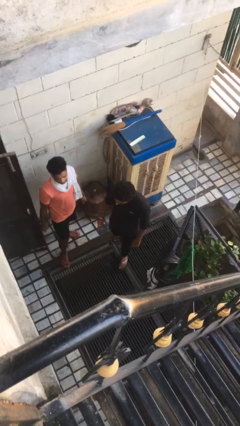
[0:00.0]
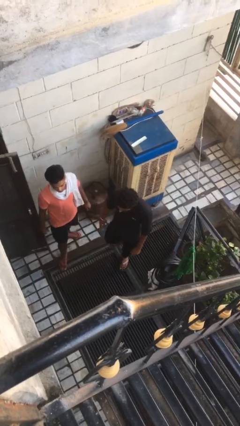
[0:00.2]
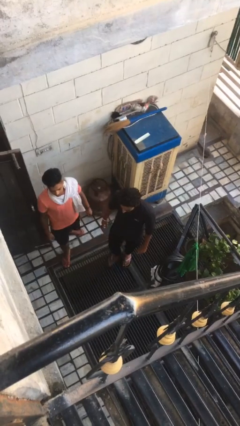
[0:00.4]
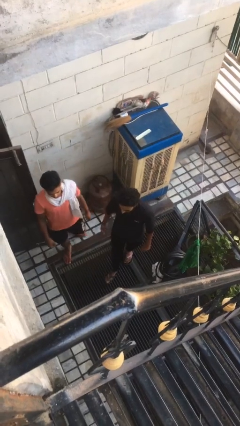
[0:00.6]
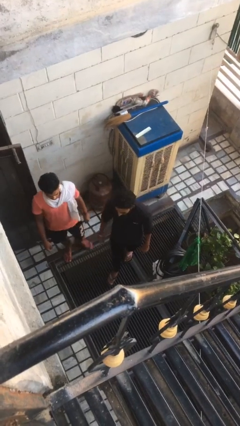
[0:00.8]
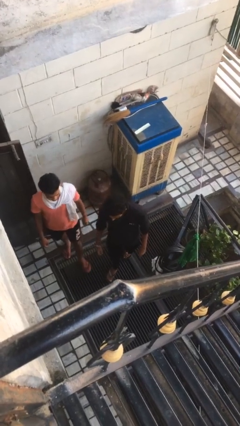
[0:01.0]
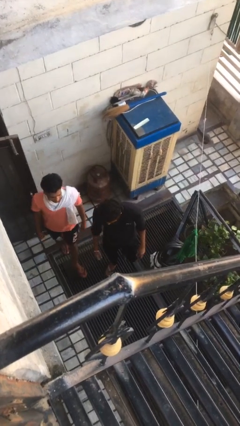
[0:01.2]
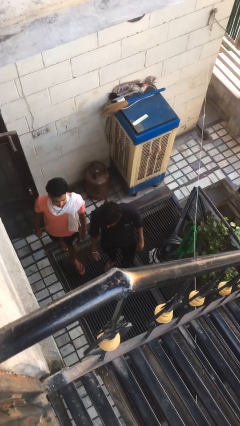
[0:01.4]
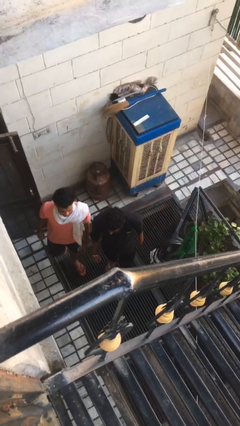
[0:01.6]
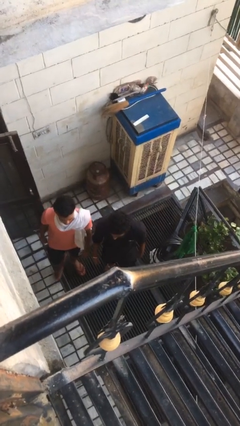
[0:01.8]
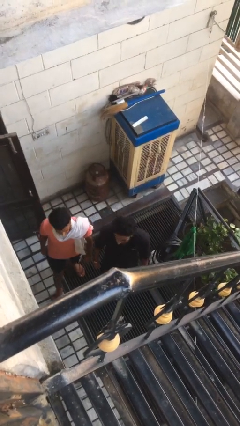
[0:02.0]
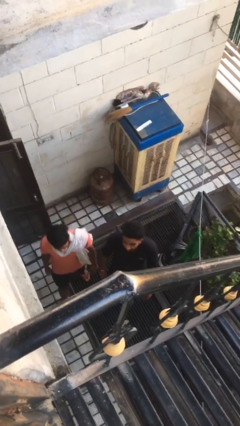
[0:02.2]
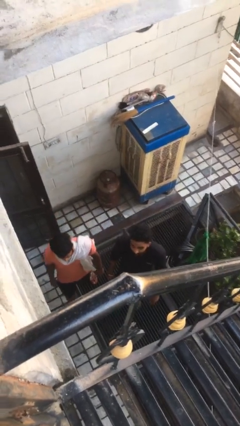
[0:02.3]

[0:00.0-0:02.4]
person talks to person

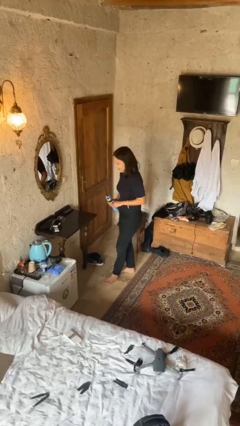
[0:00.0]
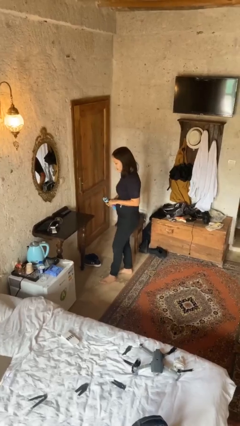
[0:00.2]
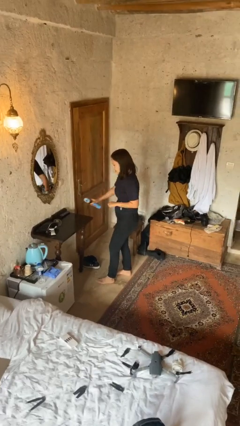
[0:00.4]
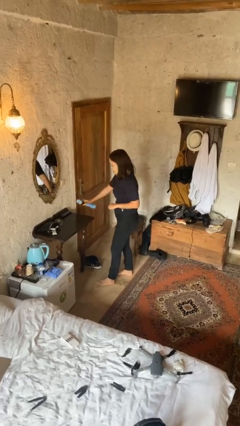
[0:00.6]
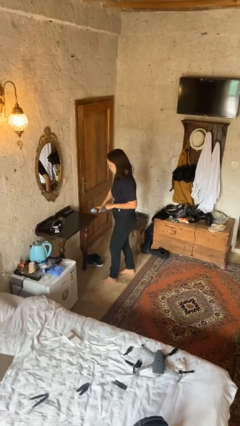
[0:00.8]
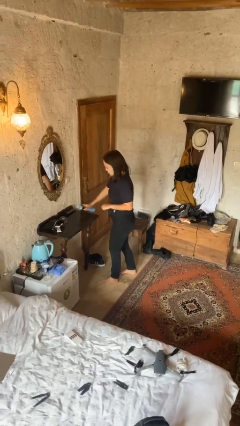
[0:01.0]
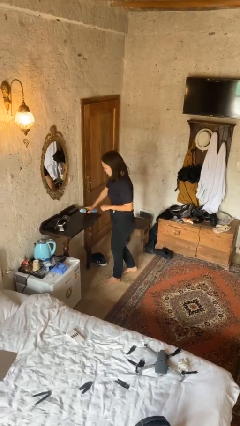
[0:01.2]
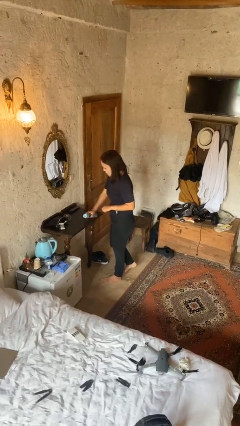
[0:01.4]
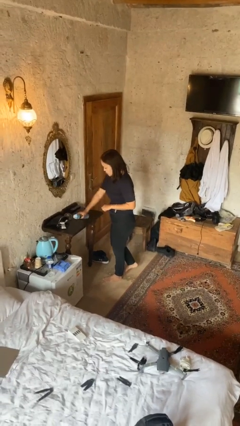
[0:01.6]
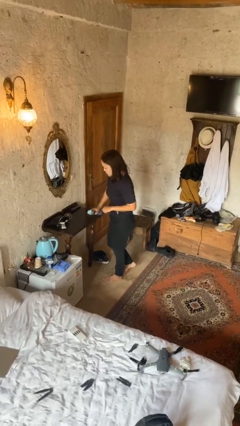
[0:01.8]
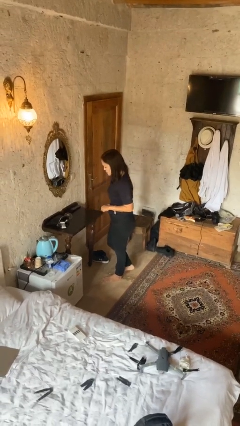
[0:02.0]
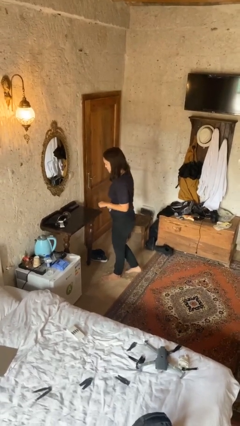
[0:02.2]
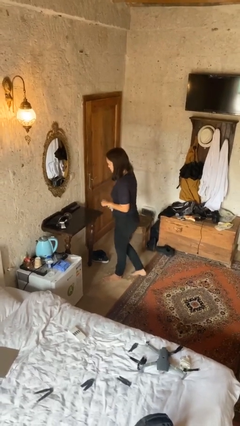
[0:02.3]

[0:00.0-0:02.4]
person sprays from bottle

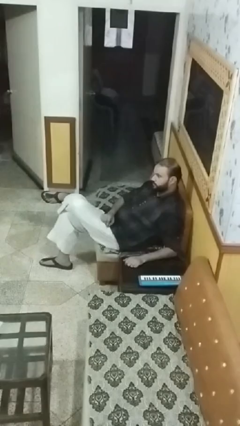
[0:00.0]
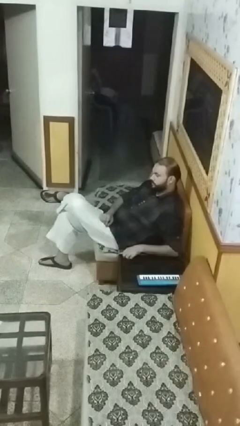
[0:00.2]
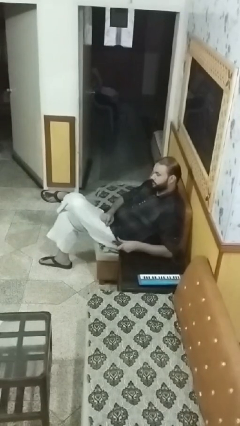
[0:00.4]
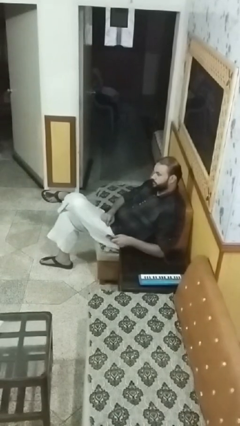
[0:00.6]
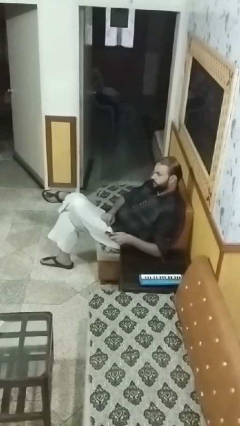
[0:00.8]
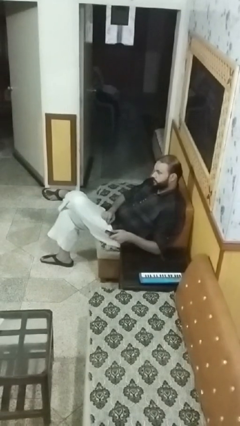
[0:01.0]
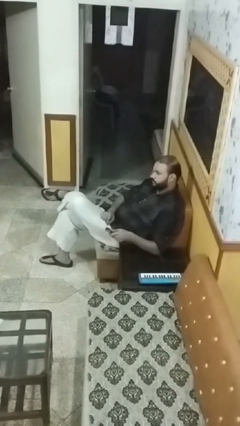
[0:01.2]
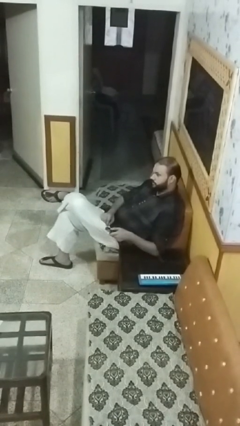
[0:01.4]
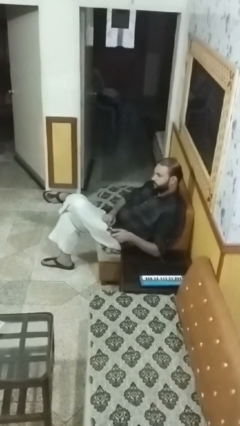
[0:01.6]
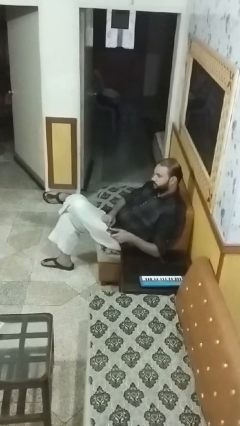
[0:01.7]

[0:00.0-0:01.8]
person uses television remote

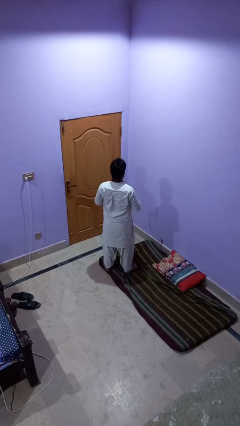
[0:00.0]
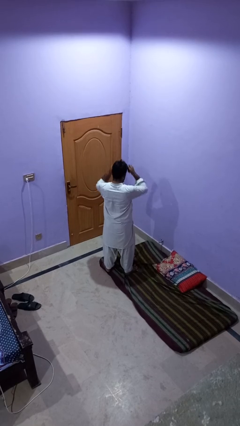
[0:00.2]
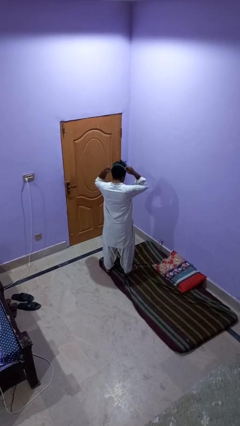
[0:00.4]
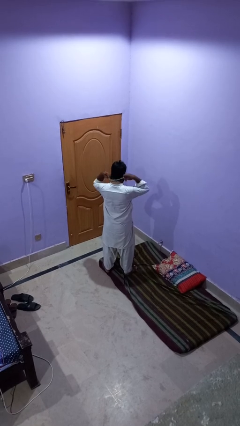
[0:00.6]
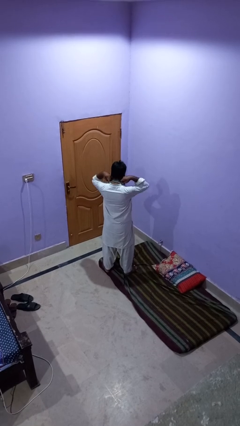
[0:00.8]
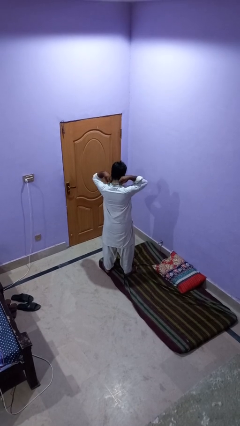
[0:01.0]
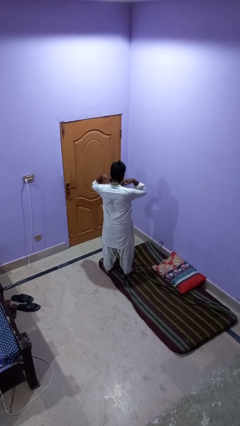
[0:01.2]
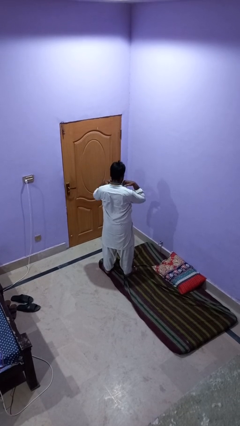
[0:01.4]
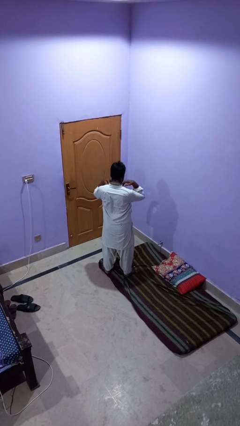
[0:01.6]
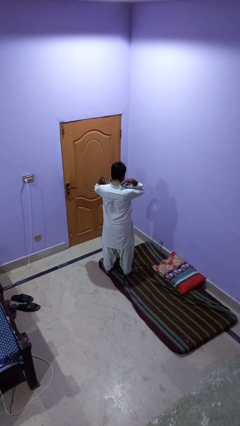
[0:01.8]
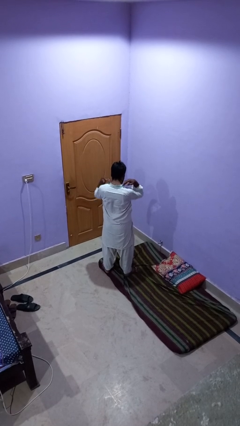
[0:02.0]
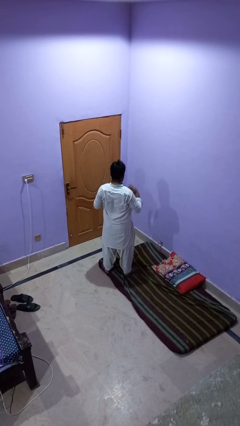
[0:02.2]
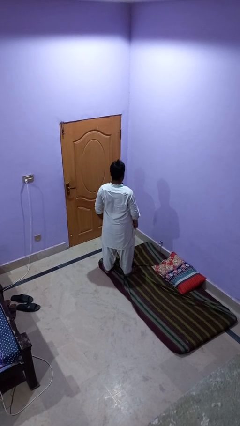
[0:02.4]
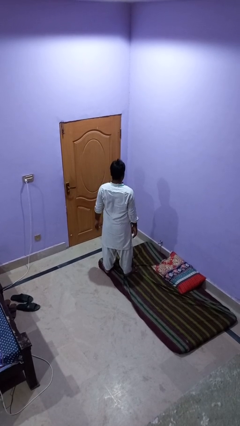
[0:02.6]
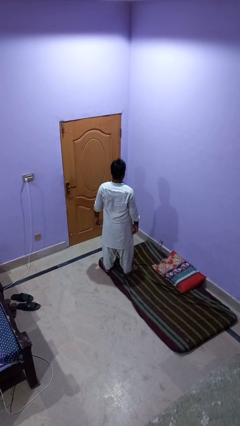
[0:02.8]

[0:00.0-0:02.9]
person puts on necklace

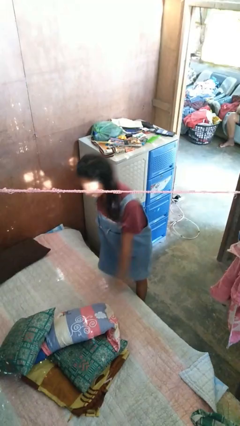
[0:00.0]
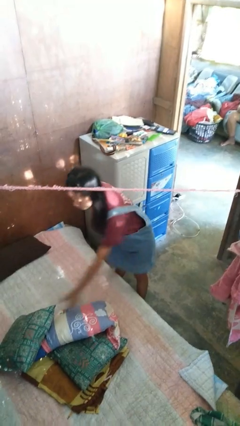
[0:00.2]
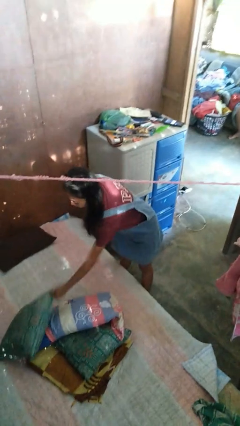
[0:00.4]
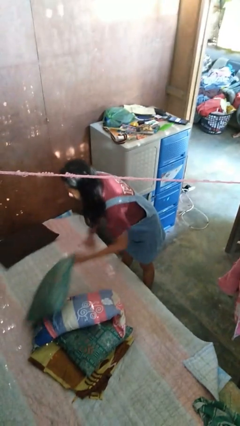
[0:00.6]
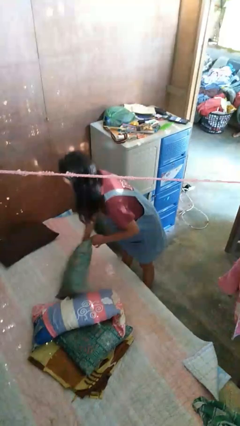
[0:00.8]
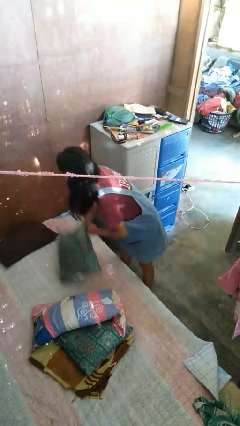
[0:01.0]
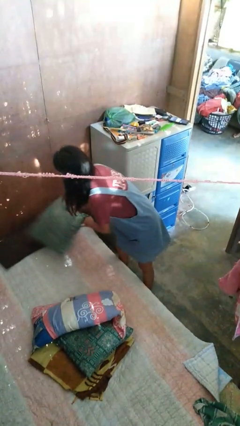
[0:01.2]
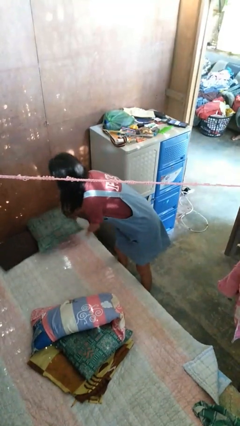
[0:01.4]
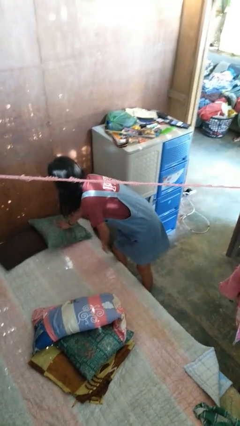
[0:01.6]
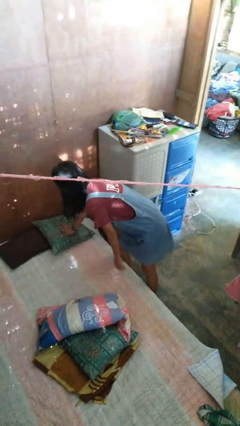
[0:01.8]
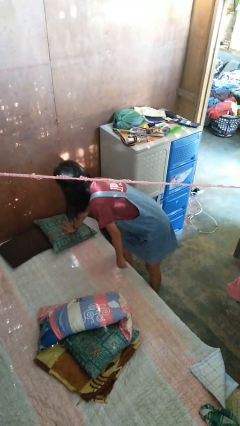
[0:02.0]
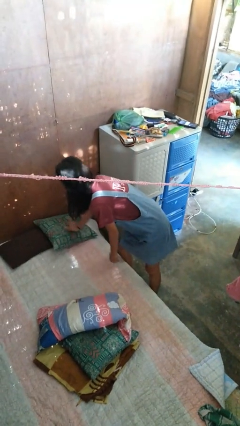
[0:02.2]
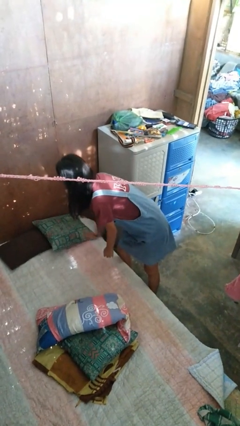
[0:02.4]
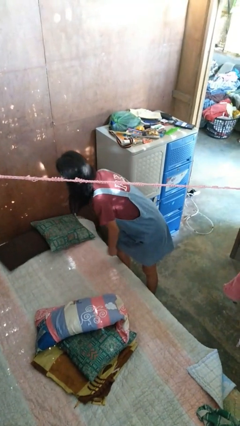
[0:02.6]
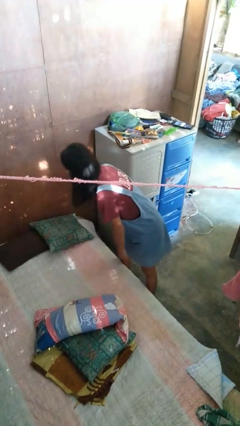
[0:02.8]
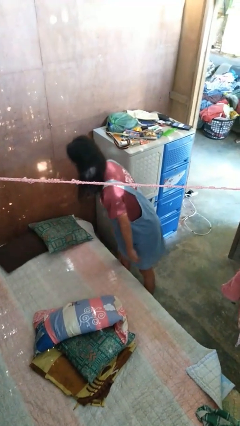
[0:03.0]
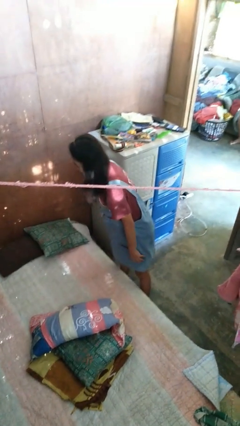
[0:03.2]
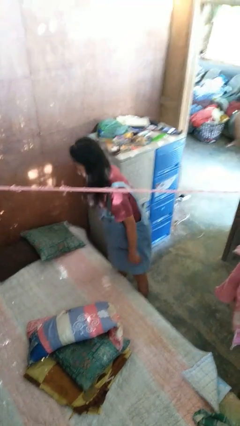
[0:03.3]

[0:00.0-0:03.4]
person makes bed

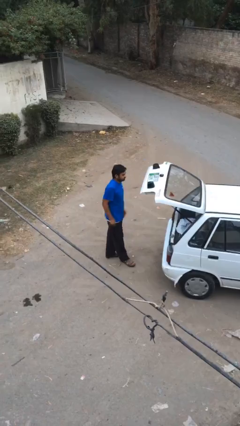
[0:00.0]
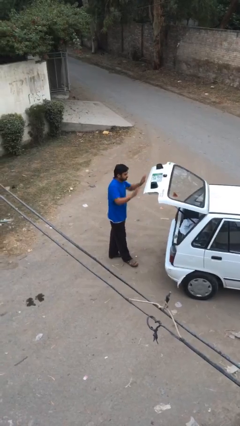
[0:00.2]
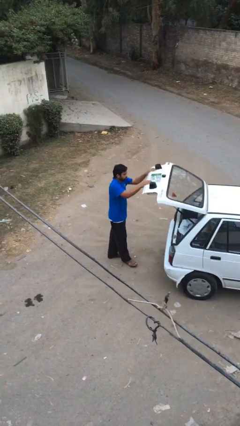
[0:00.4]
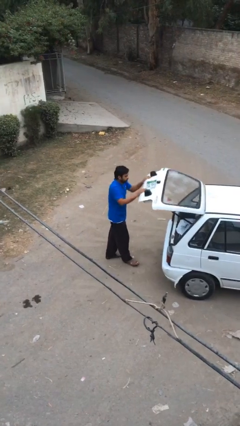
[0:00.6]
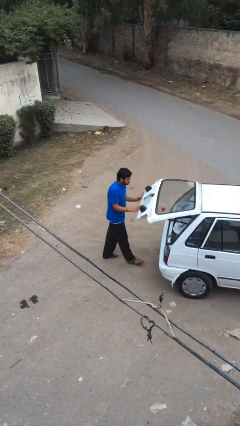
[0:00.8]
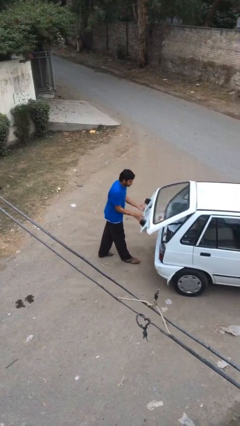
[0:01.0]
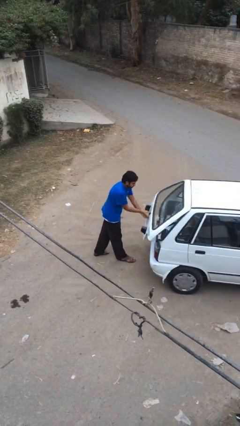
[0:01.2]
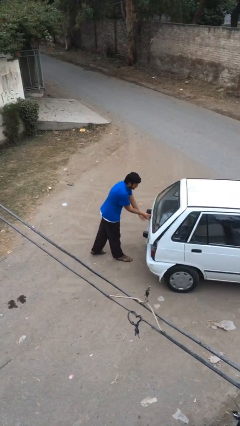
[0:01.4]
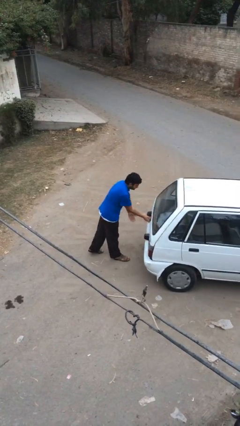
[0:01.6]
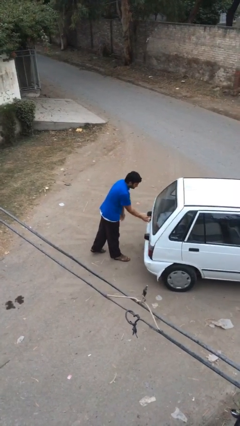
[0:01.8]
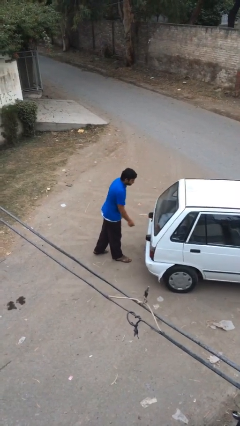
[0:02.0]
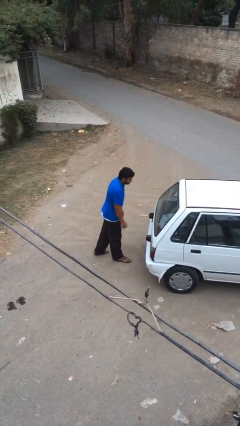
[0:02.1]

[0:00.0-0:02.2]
person closes car trunk

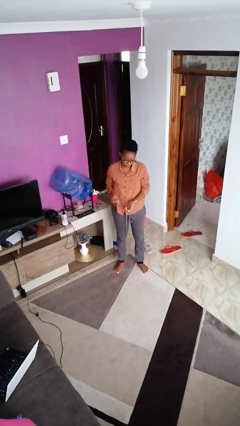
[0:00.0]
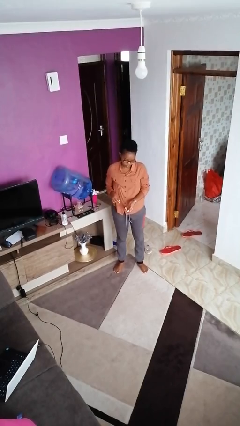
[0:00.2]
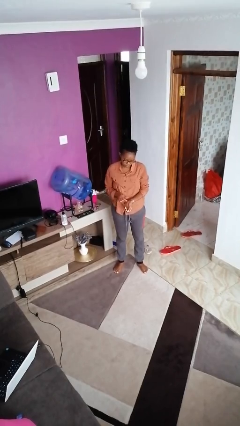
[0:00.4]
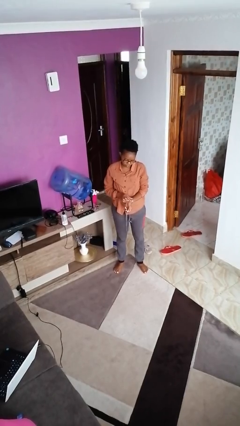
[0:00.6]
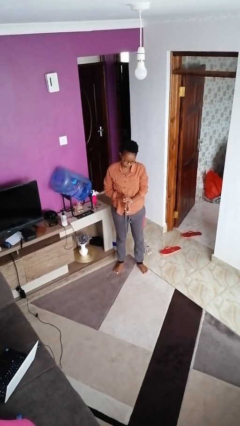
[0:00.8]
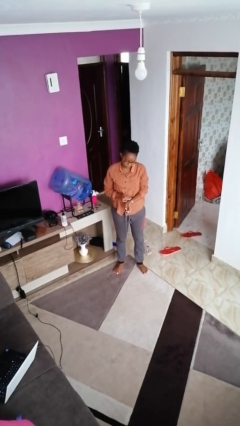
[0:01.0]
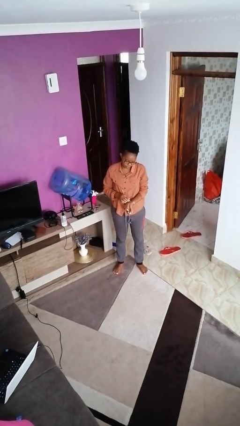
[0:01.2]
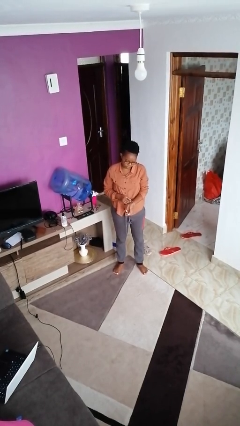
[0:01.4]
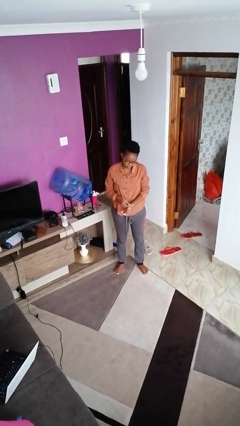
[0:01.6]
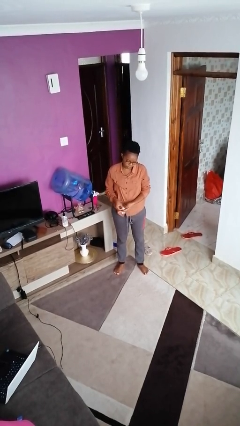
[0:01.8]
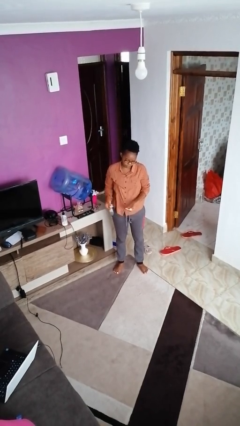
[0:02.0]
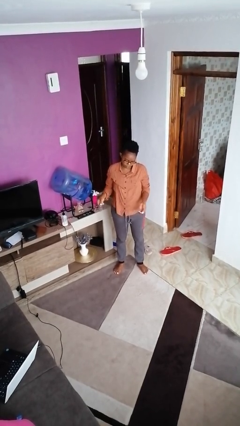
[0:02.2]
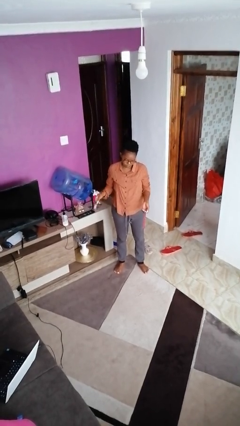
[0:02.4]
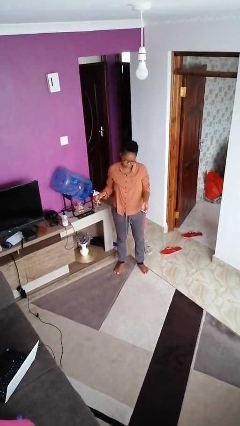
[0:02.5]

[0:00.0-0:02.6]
person takes off wristwatch
